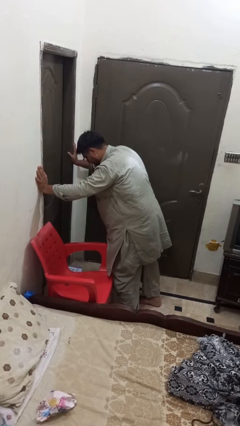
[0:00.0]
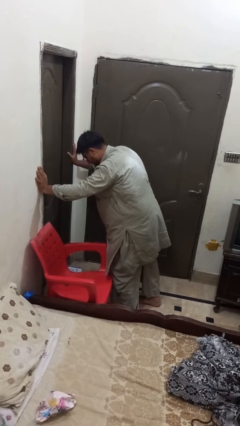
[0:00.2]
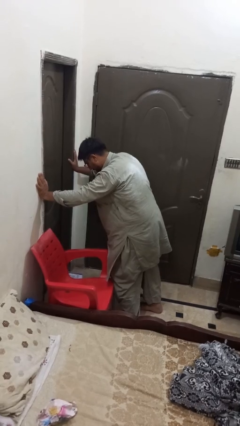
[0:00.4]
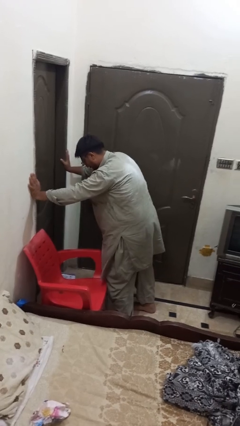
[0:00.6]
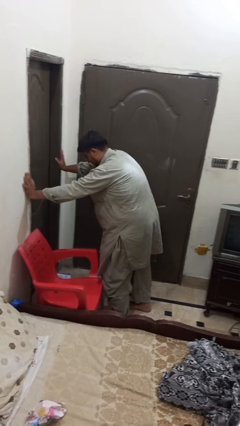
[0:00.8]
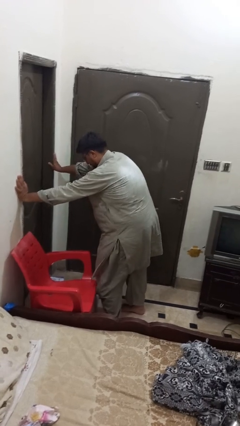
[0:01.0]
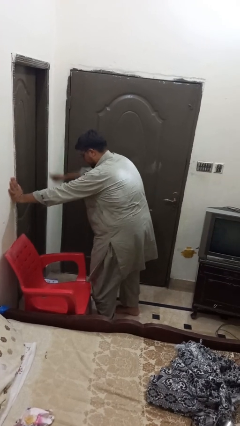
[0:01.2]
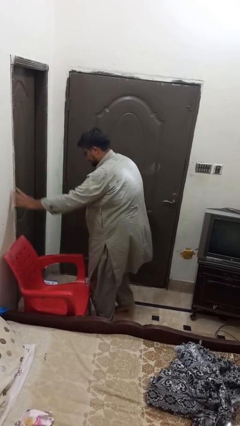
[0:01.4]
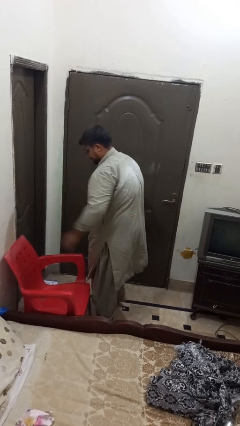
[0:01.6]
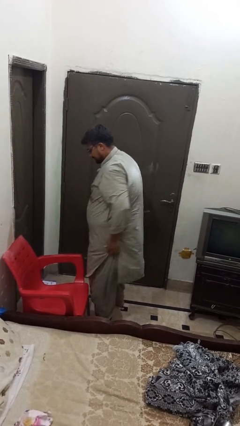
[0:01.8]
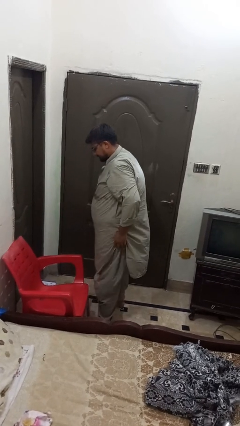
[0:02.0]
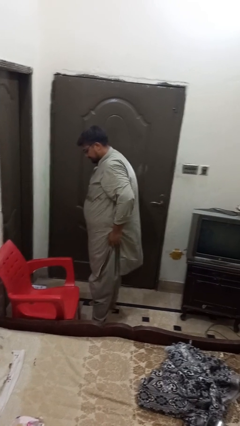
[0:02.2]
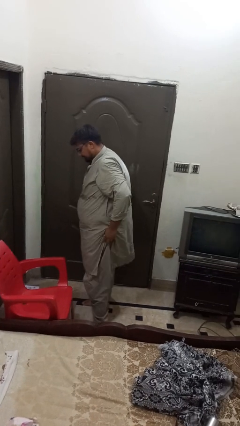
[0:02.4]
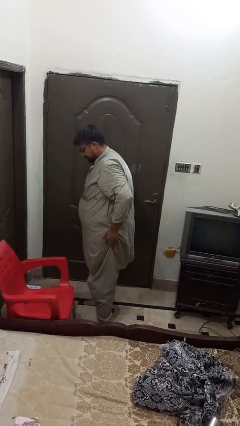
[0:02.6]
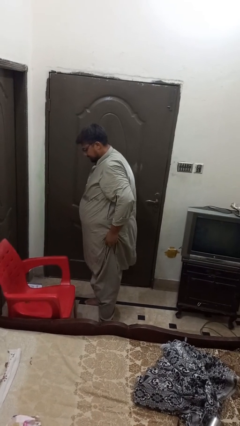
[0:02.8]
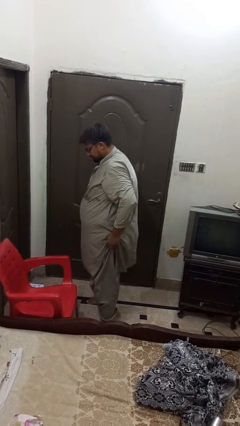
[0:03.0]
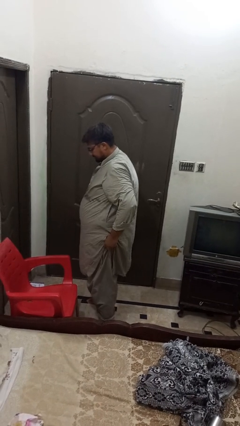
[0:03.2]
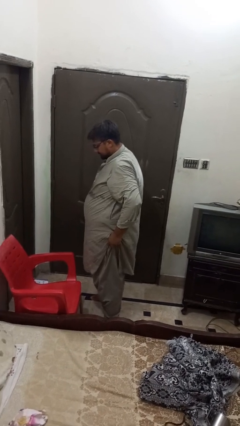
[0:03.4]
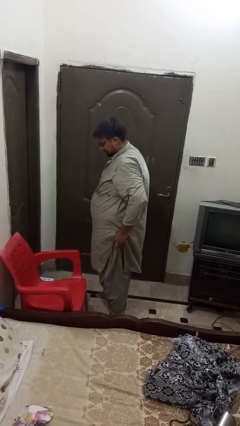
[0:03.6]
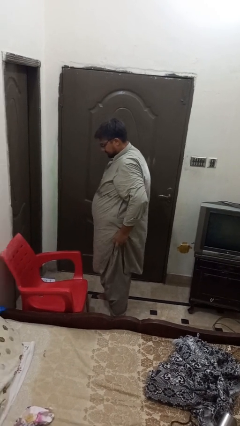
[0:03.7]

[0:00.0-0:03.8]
person stands up from floor

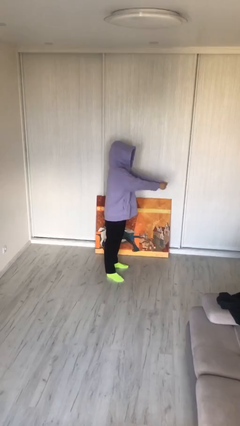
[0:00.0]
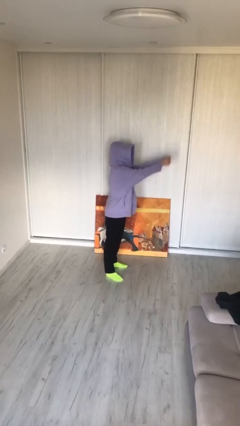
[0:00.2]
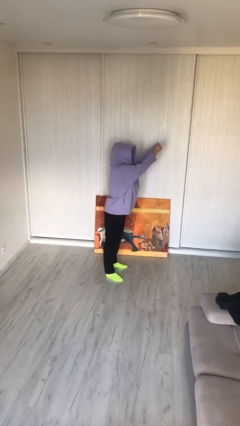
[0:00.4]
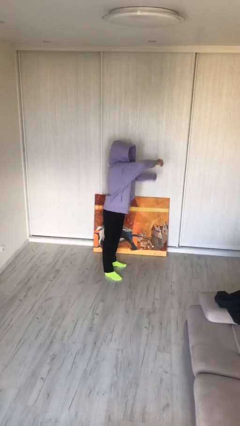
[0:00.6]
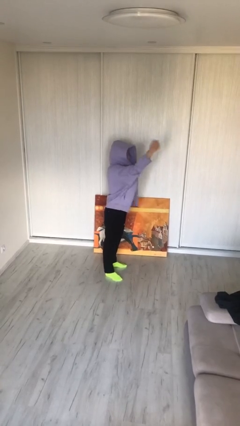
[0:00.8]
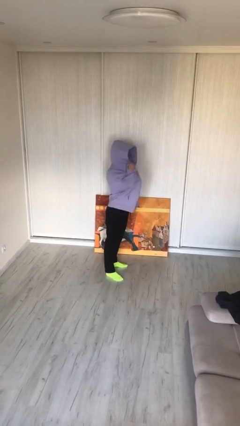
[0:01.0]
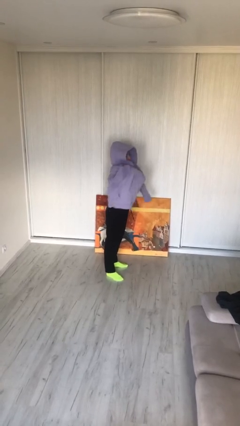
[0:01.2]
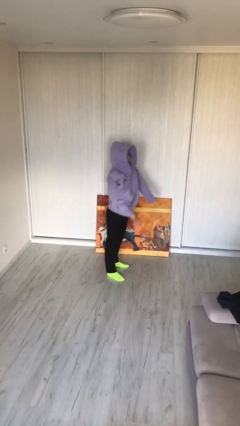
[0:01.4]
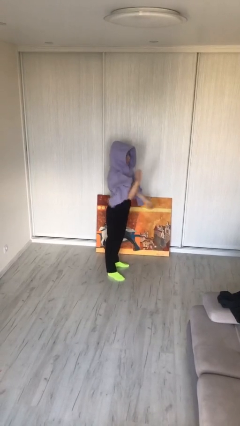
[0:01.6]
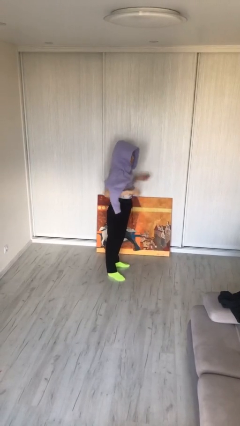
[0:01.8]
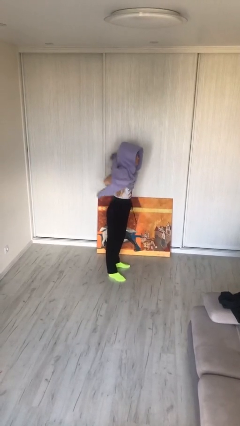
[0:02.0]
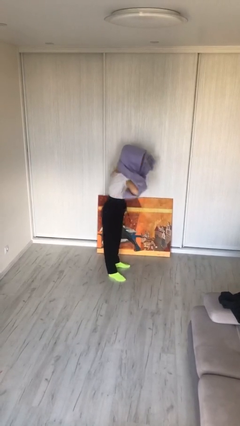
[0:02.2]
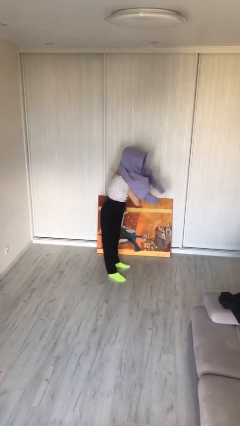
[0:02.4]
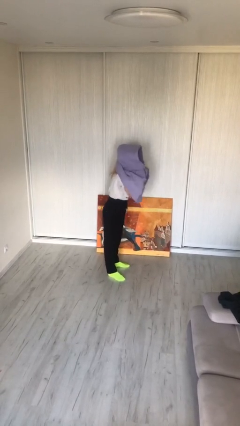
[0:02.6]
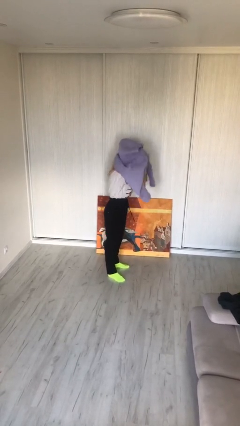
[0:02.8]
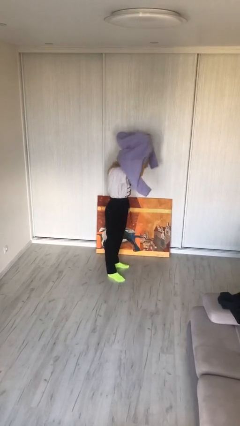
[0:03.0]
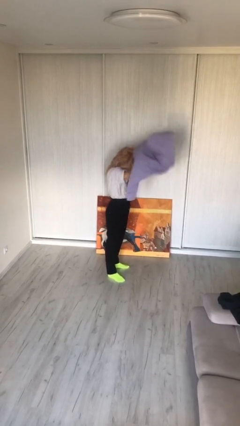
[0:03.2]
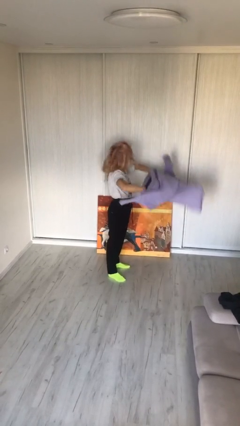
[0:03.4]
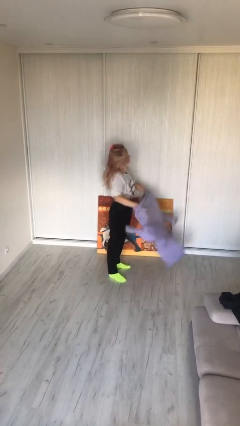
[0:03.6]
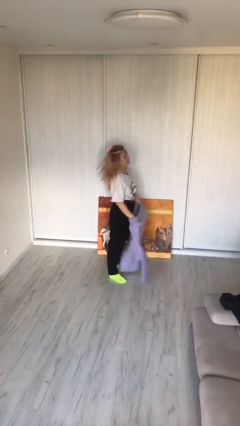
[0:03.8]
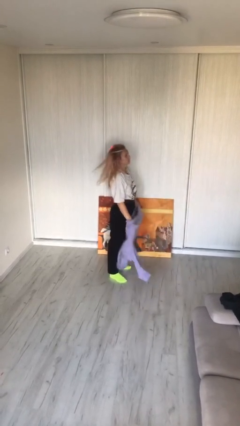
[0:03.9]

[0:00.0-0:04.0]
person takes off hoodie

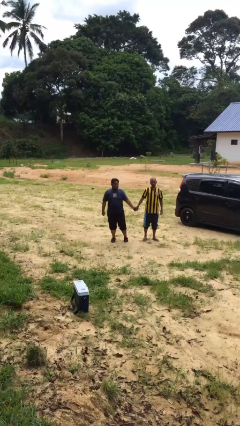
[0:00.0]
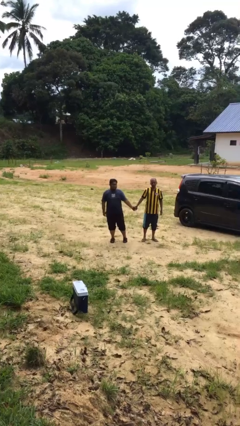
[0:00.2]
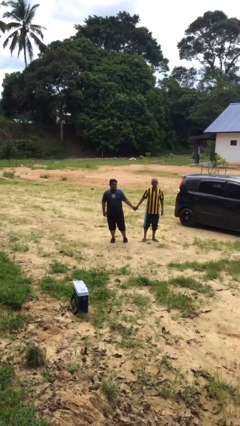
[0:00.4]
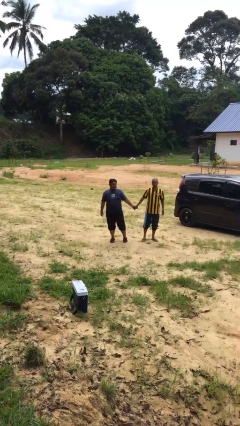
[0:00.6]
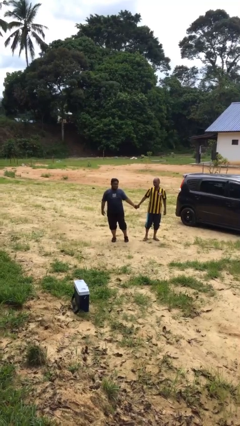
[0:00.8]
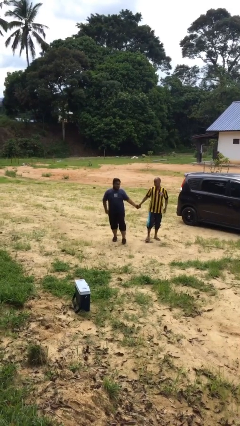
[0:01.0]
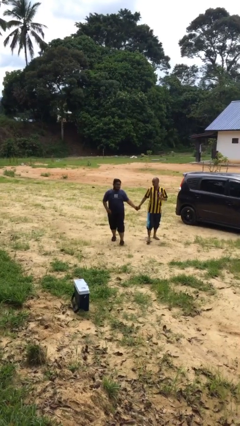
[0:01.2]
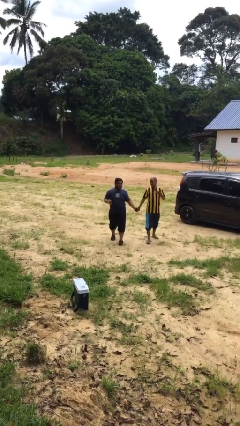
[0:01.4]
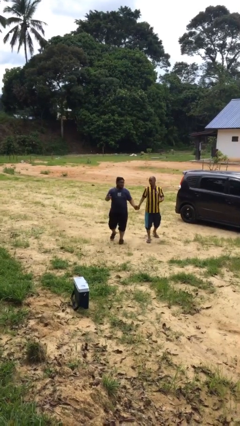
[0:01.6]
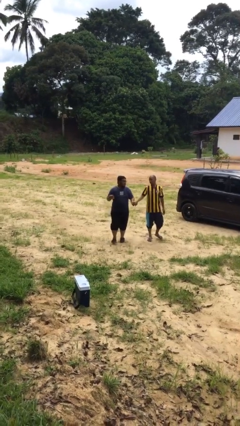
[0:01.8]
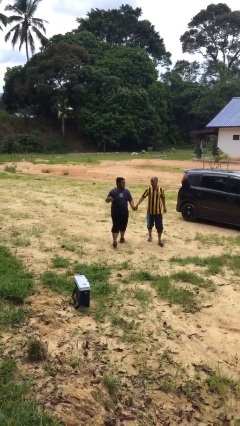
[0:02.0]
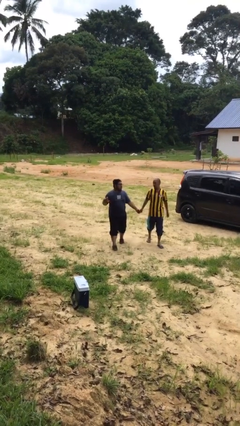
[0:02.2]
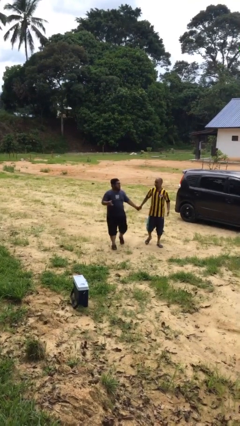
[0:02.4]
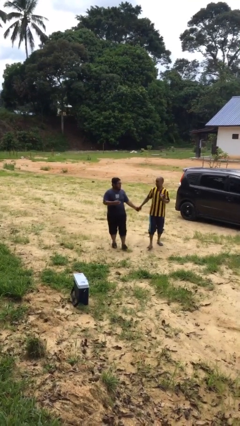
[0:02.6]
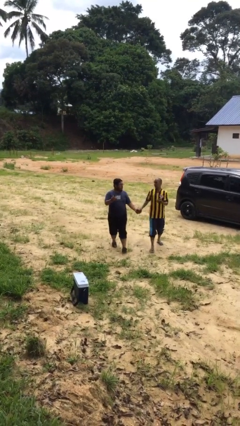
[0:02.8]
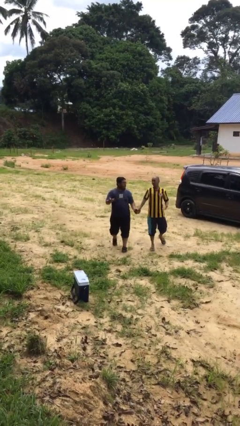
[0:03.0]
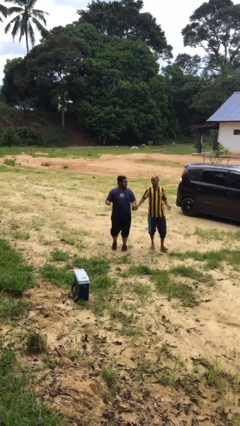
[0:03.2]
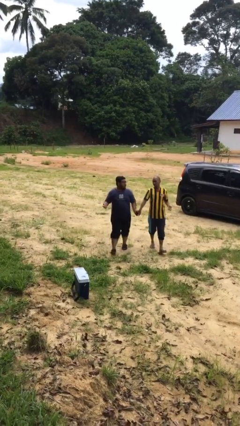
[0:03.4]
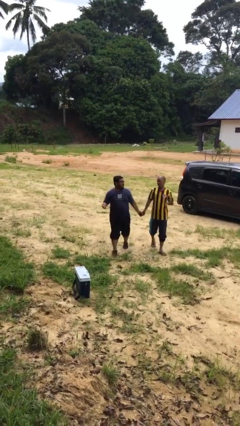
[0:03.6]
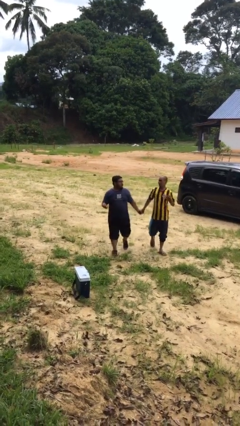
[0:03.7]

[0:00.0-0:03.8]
person holds hand

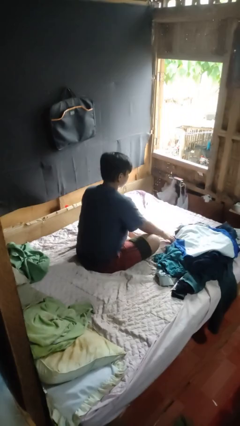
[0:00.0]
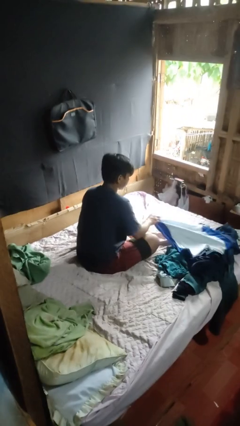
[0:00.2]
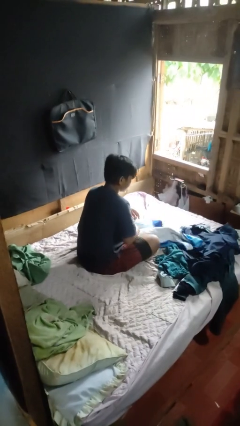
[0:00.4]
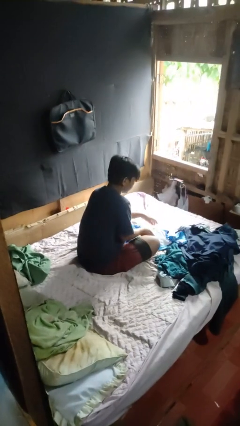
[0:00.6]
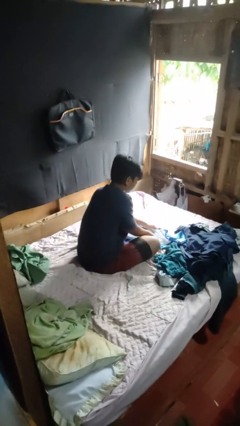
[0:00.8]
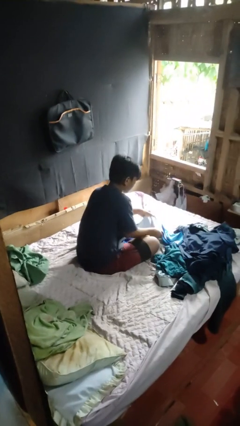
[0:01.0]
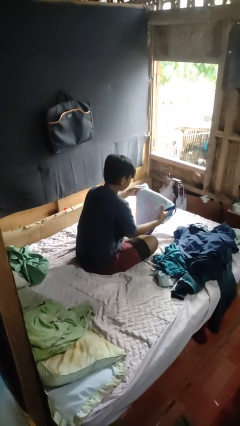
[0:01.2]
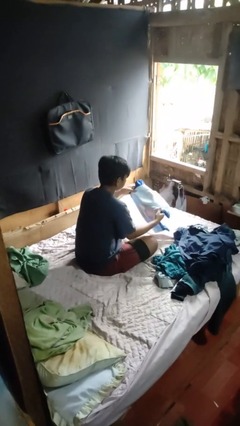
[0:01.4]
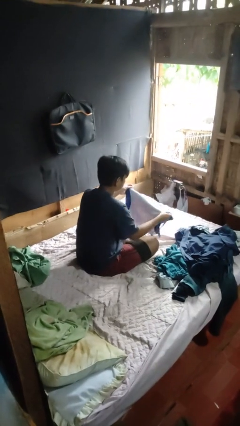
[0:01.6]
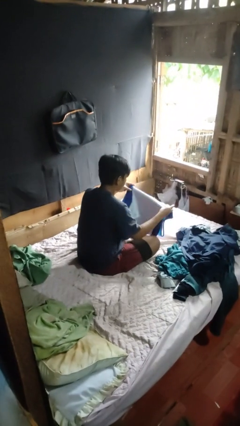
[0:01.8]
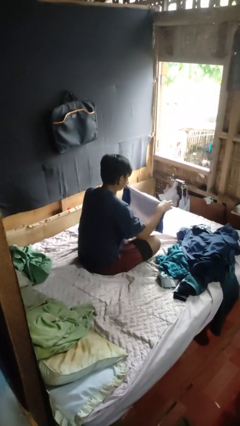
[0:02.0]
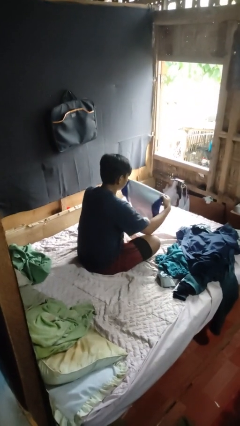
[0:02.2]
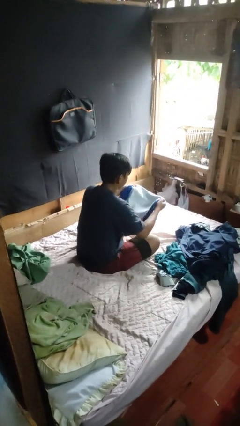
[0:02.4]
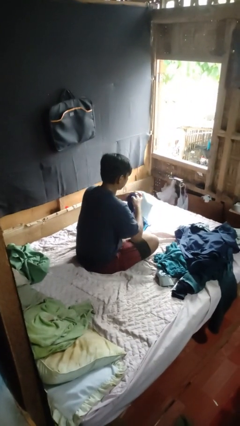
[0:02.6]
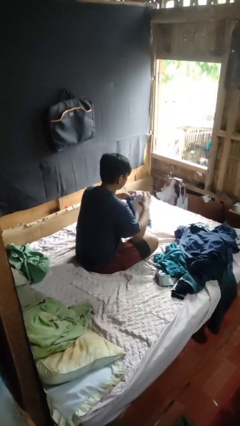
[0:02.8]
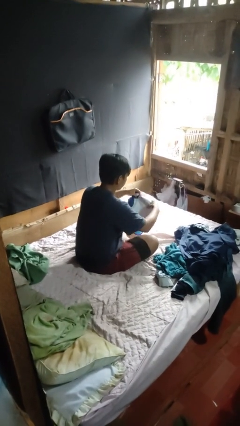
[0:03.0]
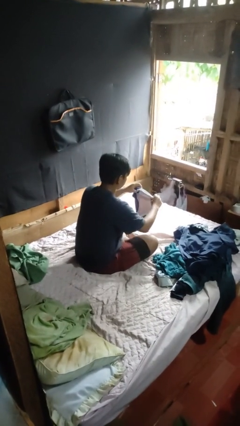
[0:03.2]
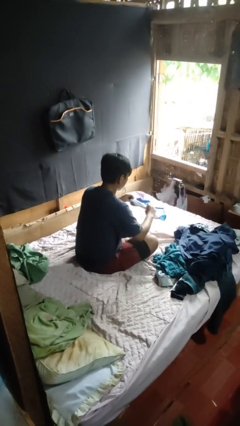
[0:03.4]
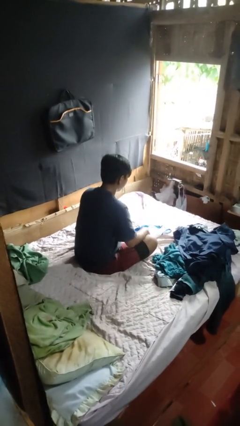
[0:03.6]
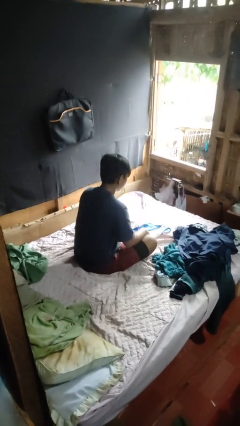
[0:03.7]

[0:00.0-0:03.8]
person folds shirt

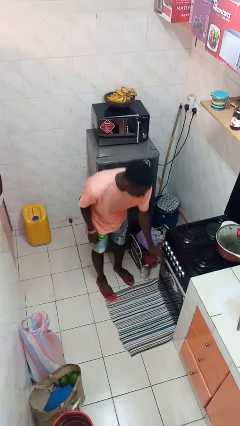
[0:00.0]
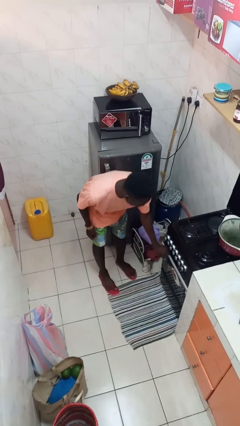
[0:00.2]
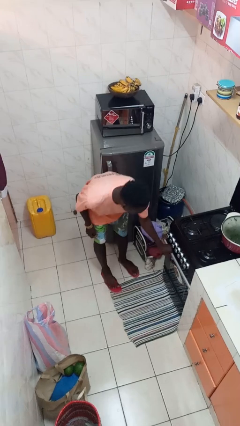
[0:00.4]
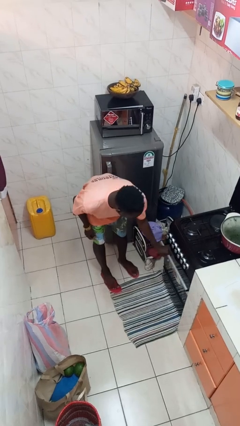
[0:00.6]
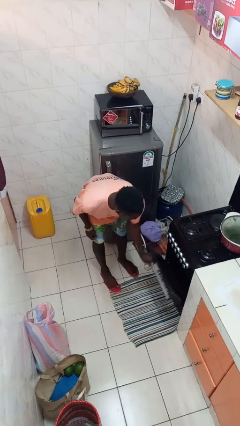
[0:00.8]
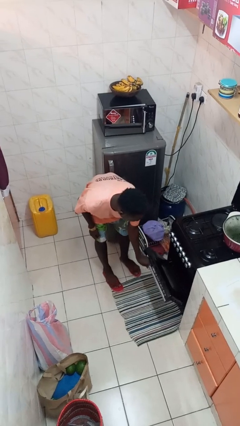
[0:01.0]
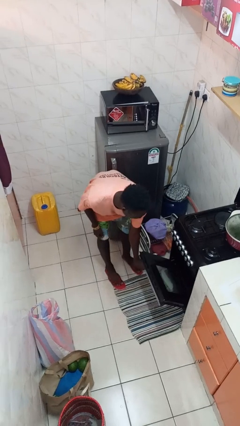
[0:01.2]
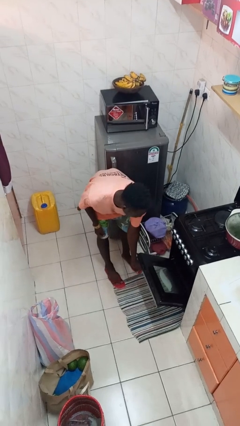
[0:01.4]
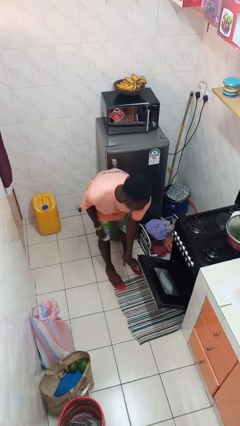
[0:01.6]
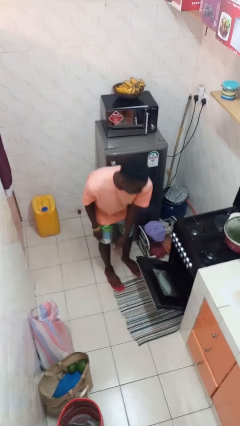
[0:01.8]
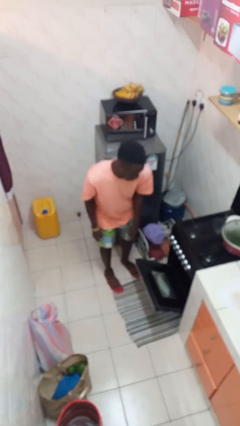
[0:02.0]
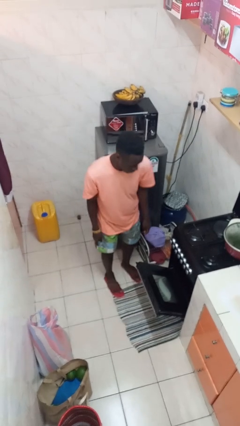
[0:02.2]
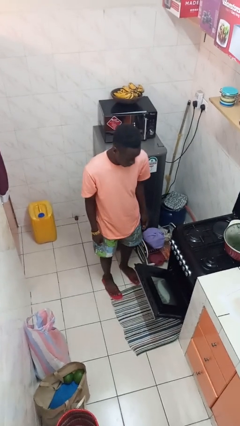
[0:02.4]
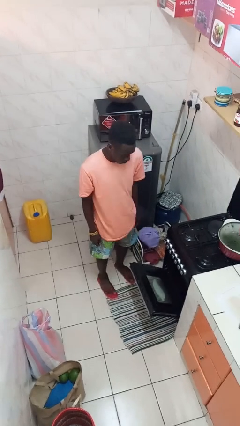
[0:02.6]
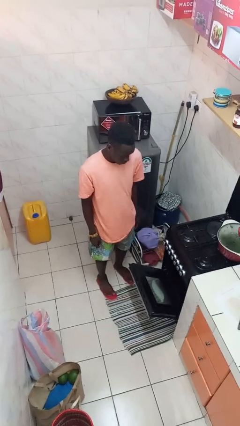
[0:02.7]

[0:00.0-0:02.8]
person opens oven door
